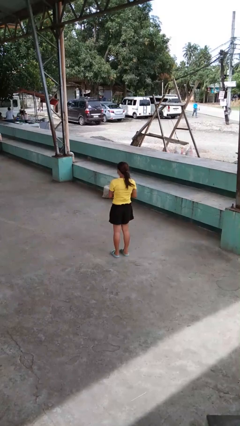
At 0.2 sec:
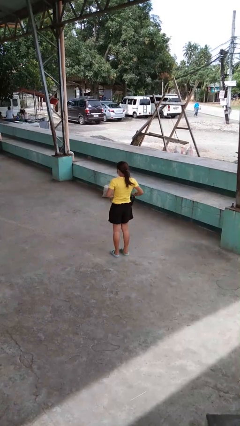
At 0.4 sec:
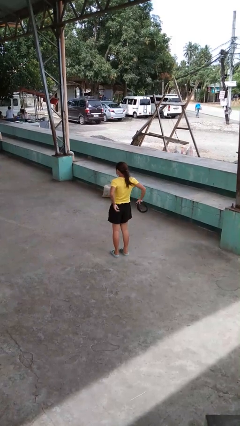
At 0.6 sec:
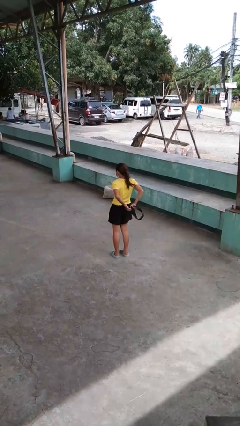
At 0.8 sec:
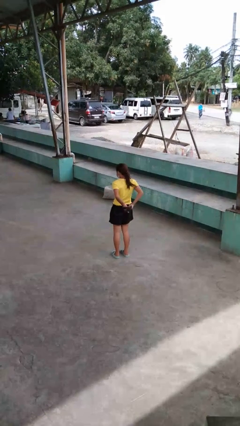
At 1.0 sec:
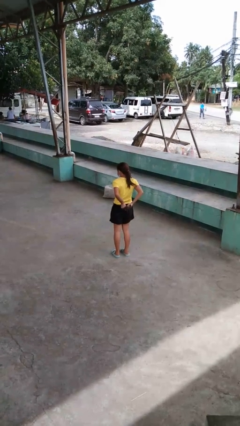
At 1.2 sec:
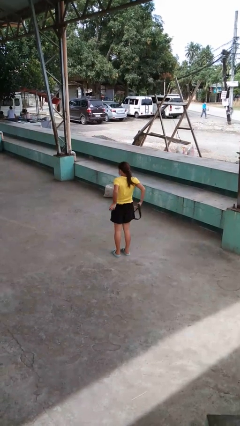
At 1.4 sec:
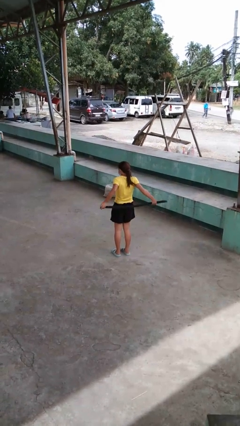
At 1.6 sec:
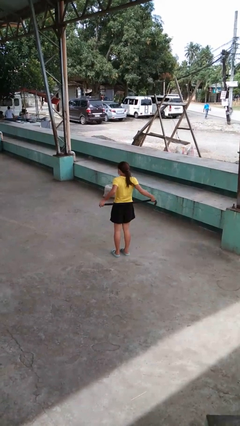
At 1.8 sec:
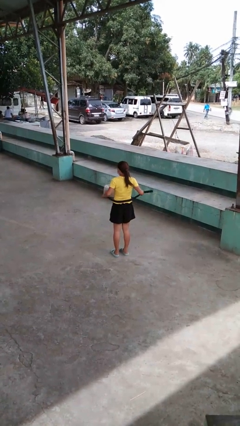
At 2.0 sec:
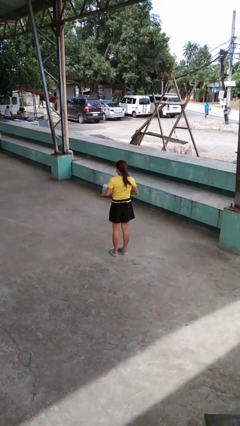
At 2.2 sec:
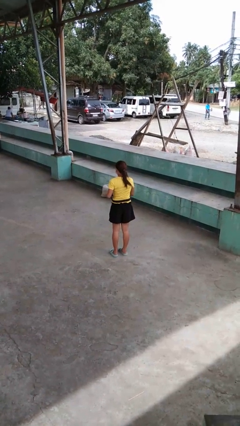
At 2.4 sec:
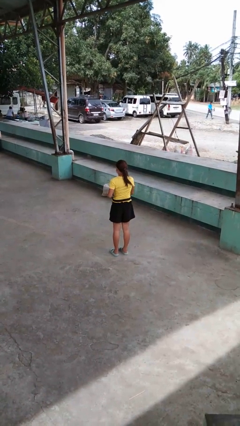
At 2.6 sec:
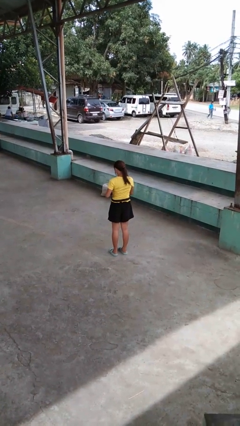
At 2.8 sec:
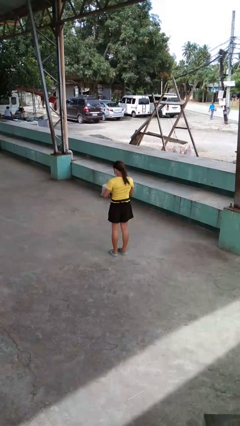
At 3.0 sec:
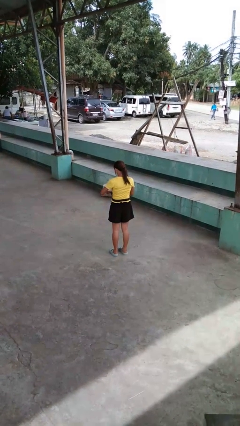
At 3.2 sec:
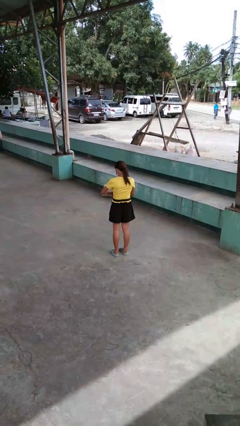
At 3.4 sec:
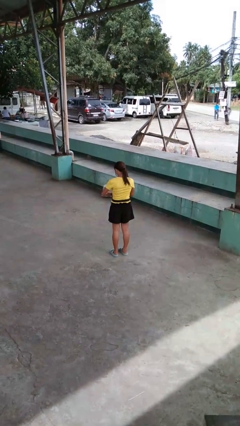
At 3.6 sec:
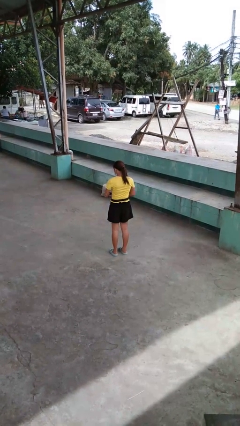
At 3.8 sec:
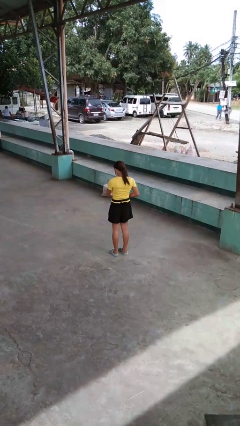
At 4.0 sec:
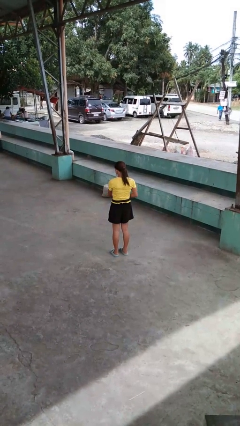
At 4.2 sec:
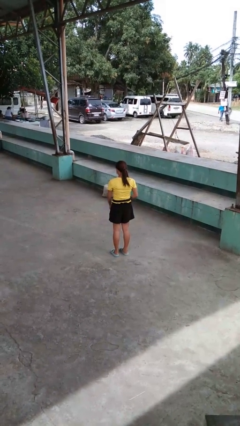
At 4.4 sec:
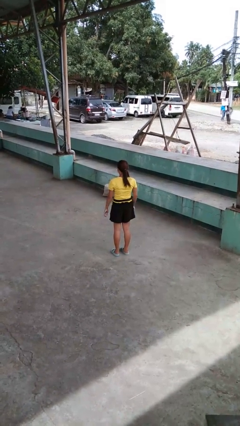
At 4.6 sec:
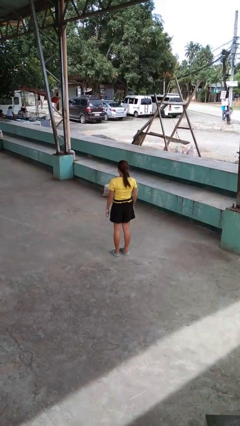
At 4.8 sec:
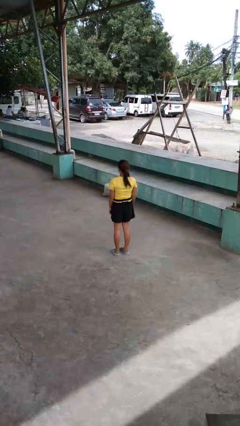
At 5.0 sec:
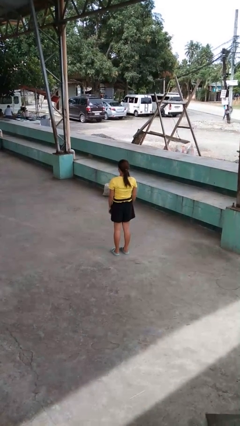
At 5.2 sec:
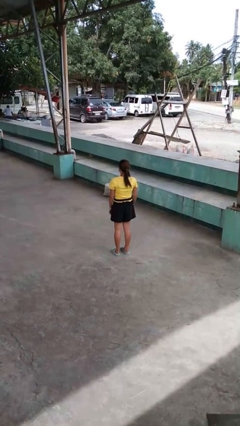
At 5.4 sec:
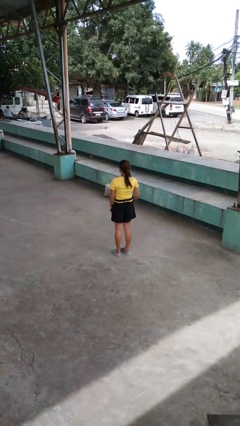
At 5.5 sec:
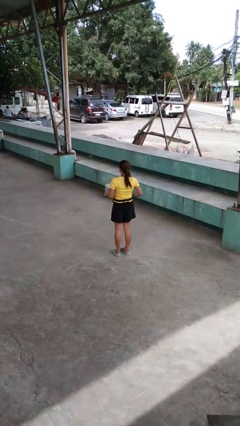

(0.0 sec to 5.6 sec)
person puts on belt

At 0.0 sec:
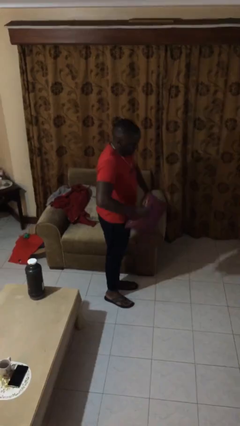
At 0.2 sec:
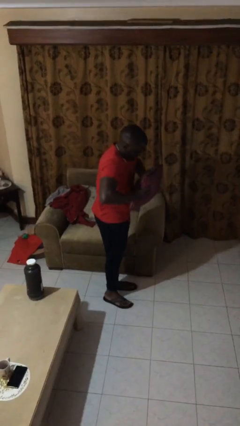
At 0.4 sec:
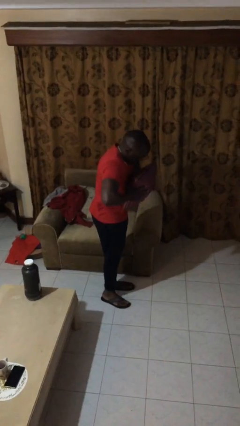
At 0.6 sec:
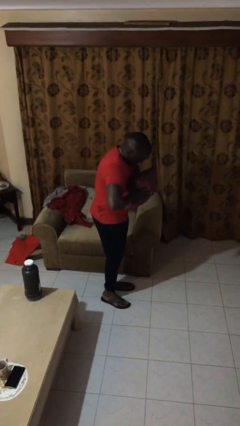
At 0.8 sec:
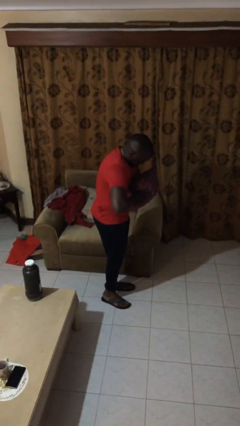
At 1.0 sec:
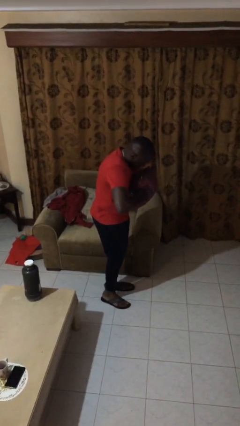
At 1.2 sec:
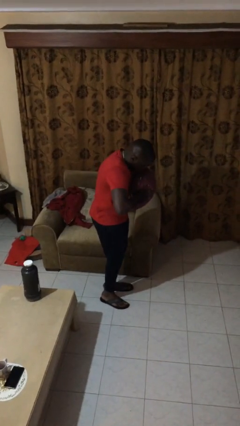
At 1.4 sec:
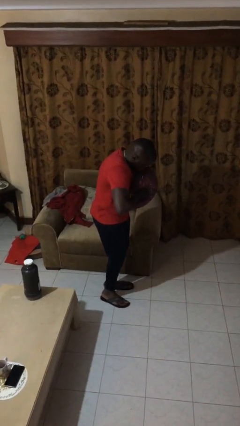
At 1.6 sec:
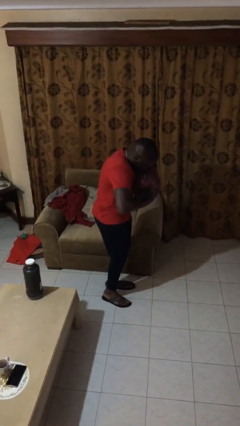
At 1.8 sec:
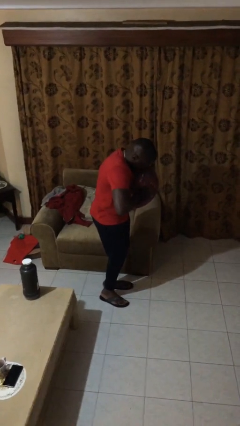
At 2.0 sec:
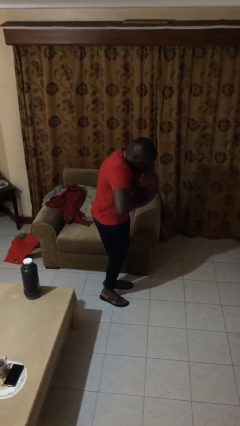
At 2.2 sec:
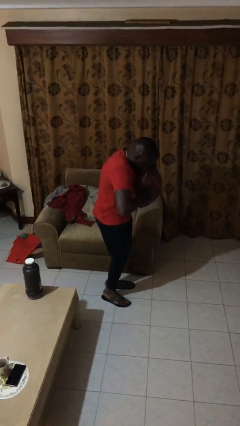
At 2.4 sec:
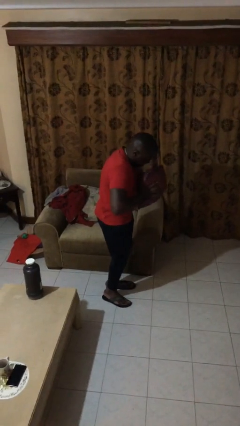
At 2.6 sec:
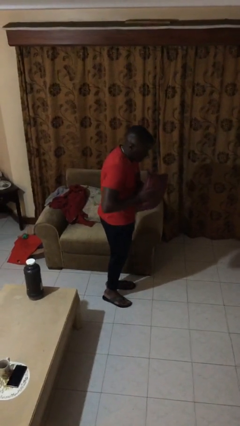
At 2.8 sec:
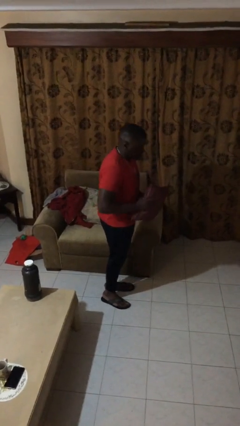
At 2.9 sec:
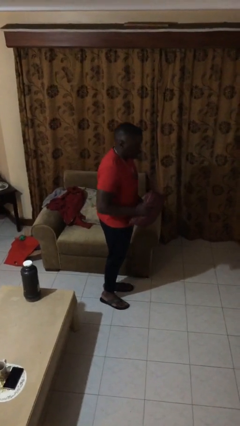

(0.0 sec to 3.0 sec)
person squeezes object

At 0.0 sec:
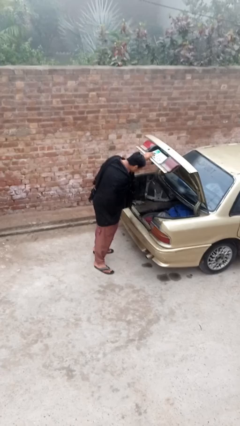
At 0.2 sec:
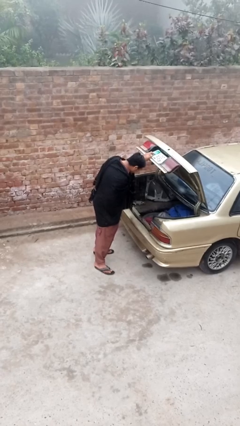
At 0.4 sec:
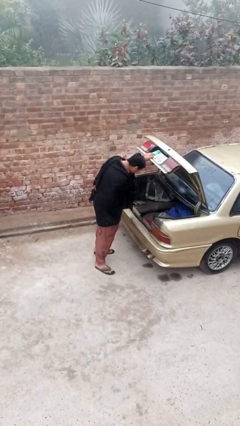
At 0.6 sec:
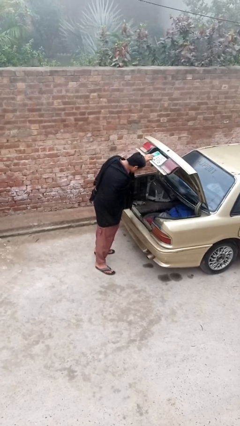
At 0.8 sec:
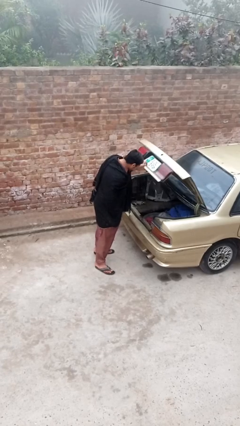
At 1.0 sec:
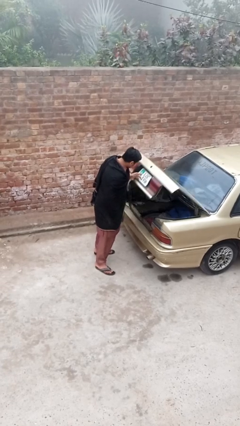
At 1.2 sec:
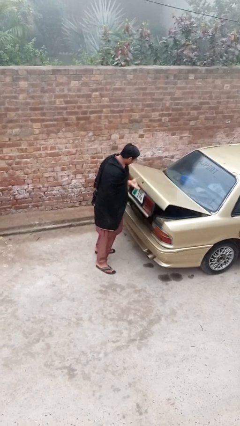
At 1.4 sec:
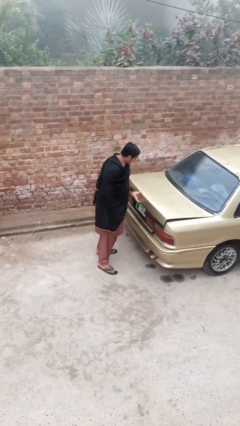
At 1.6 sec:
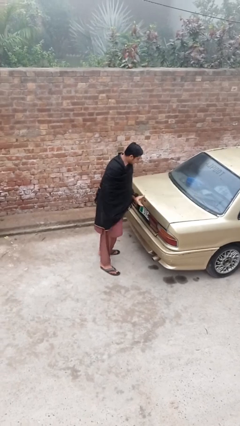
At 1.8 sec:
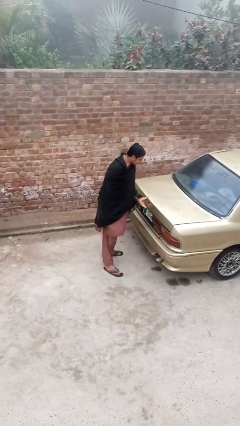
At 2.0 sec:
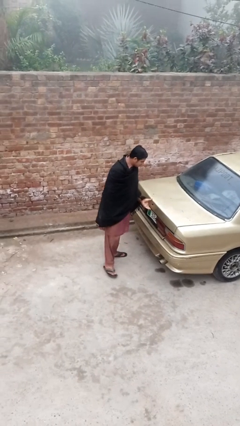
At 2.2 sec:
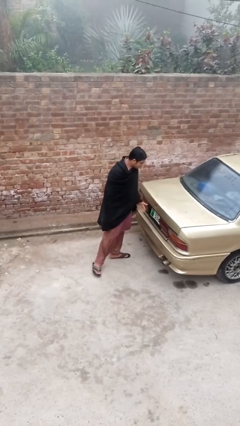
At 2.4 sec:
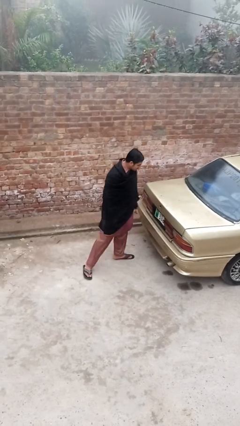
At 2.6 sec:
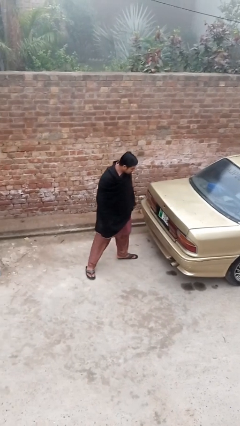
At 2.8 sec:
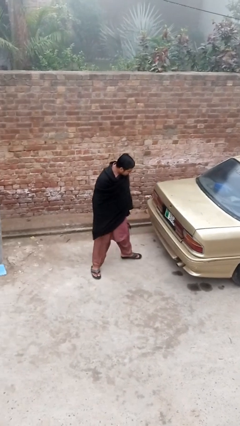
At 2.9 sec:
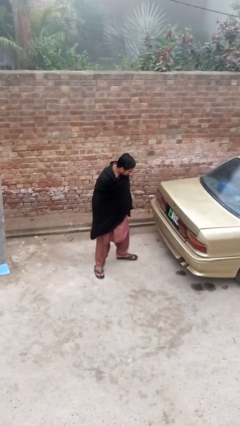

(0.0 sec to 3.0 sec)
person closes car trunk

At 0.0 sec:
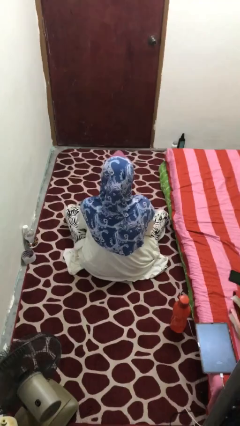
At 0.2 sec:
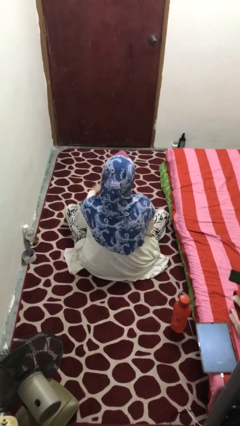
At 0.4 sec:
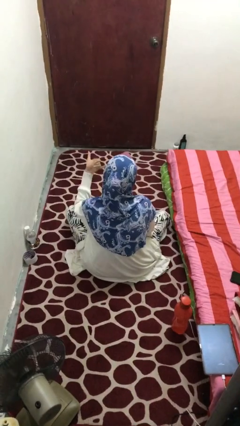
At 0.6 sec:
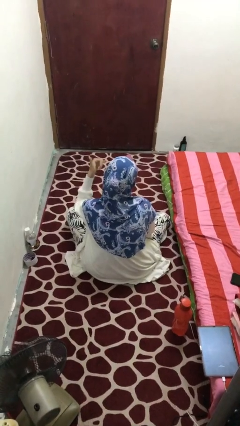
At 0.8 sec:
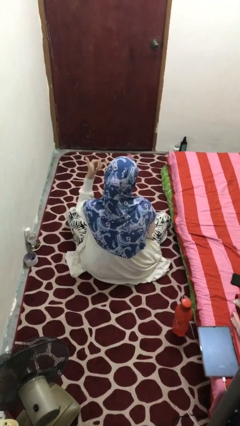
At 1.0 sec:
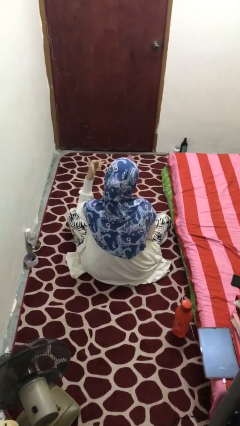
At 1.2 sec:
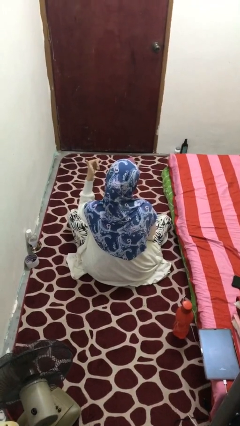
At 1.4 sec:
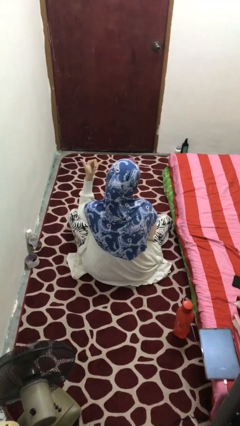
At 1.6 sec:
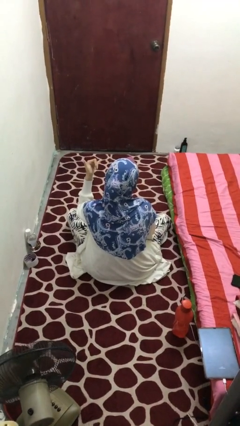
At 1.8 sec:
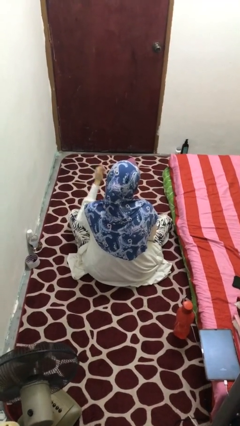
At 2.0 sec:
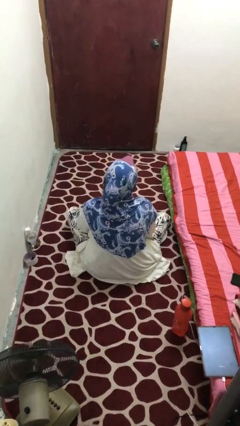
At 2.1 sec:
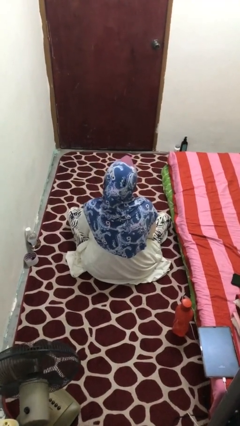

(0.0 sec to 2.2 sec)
person gestures hang loose

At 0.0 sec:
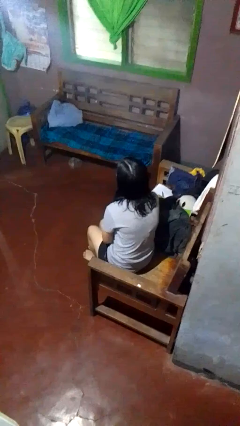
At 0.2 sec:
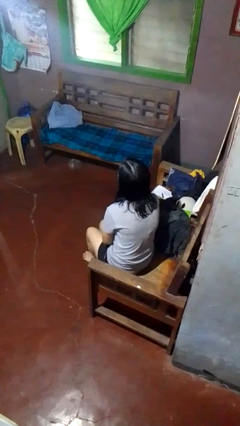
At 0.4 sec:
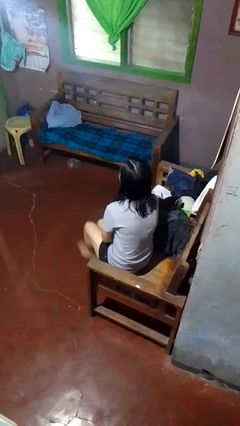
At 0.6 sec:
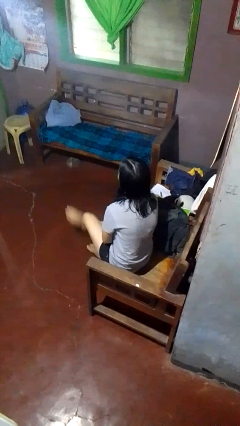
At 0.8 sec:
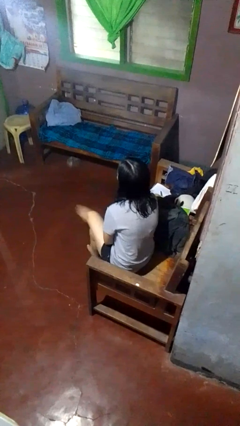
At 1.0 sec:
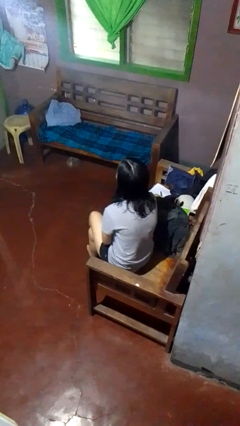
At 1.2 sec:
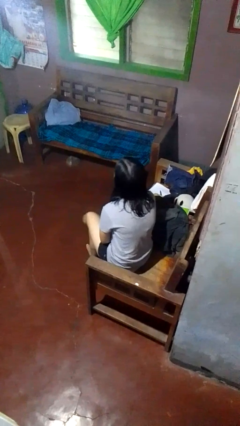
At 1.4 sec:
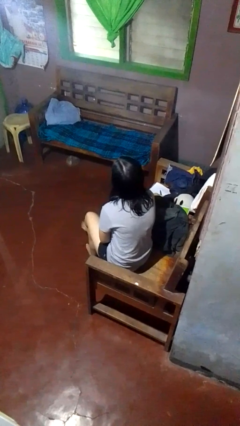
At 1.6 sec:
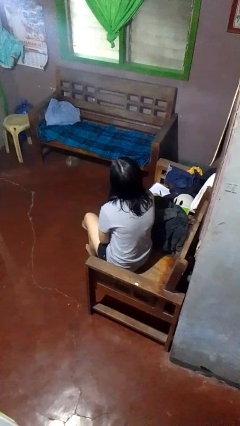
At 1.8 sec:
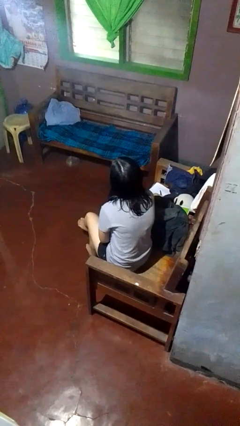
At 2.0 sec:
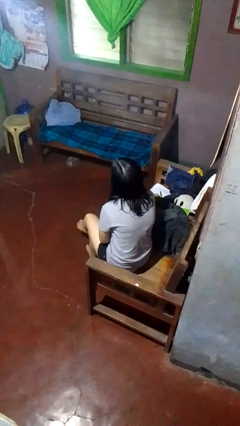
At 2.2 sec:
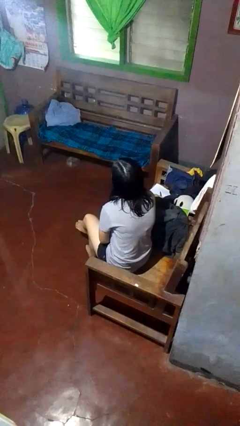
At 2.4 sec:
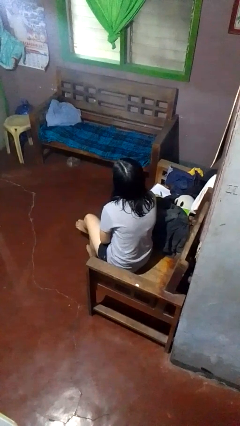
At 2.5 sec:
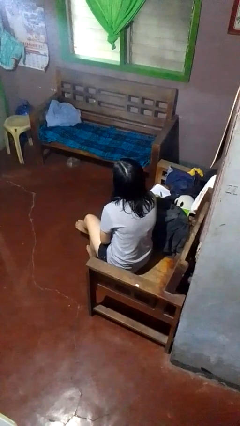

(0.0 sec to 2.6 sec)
person crosses legs

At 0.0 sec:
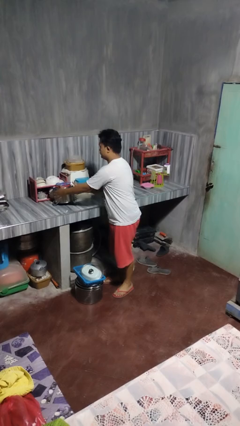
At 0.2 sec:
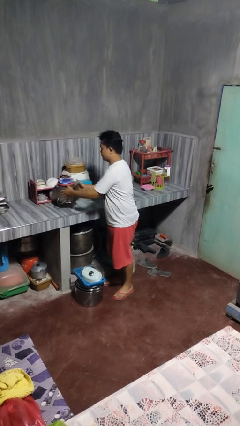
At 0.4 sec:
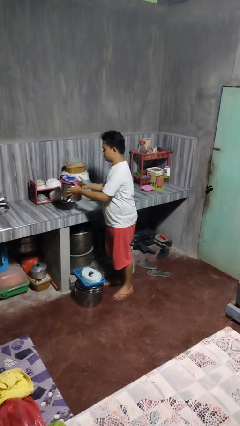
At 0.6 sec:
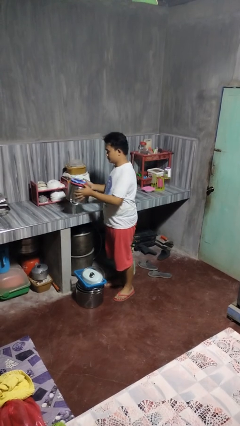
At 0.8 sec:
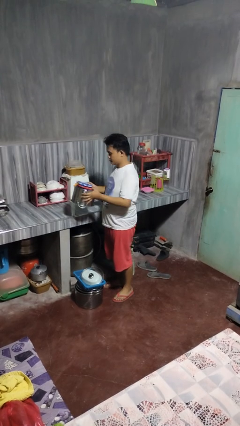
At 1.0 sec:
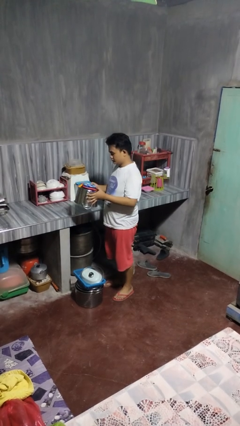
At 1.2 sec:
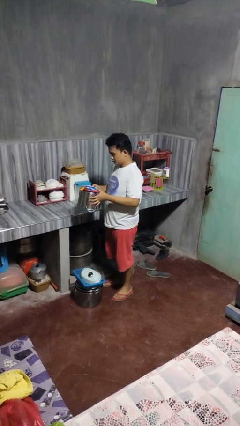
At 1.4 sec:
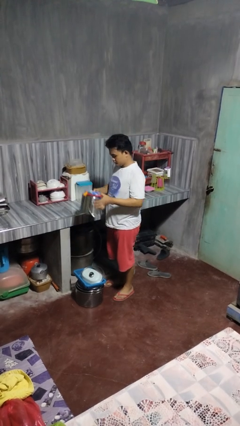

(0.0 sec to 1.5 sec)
person picks up object from countertop
